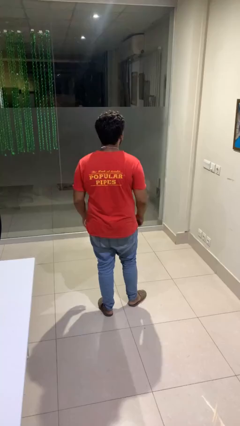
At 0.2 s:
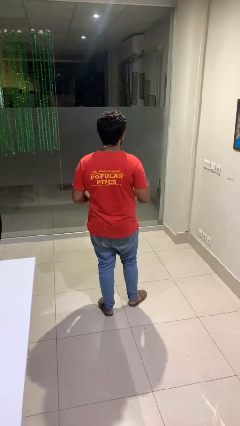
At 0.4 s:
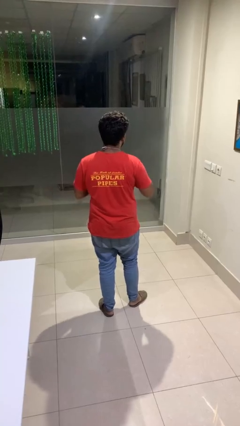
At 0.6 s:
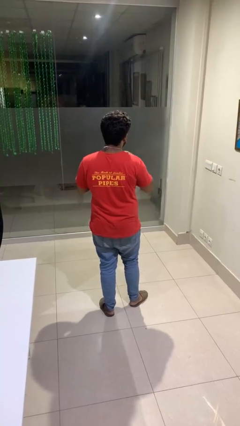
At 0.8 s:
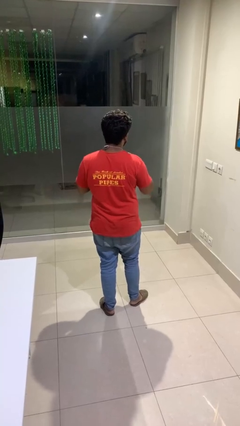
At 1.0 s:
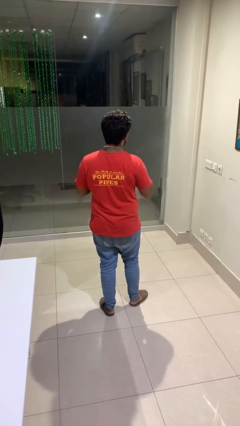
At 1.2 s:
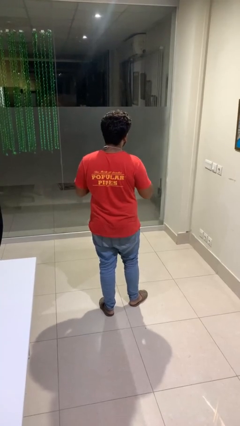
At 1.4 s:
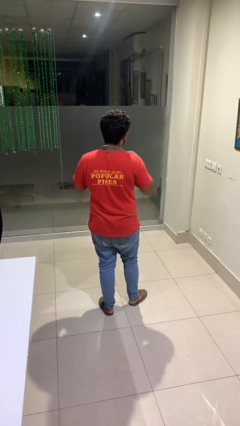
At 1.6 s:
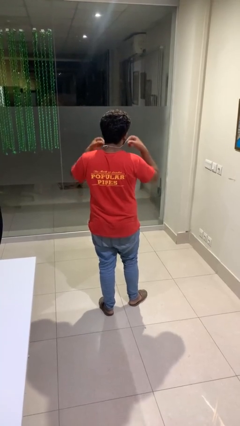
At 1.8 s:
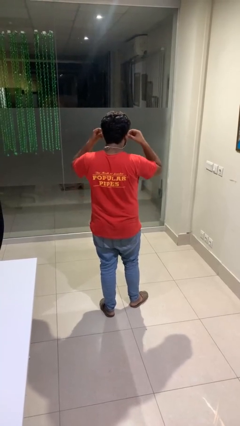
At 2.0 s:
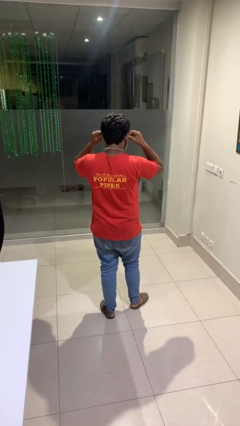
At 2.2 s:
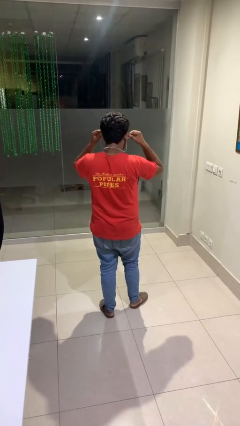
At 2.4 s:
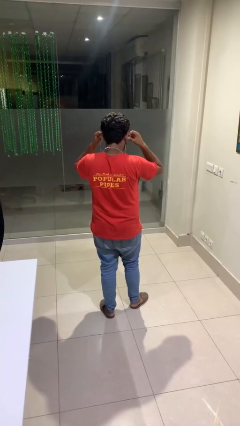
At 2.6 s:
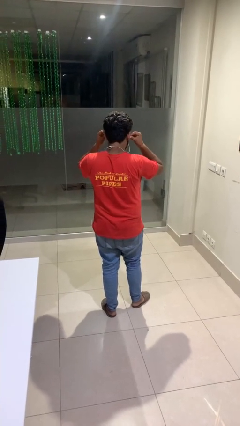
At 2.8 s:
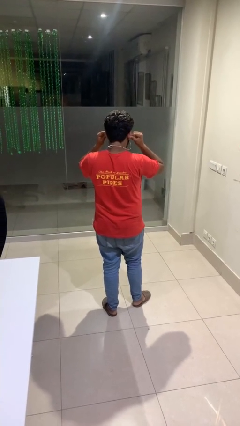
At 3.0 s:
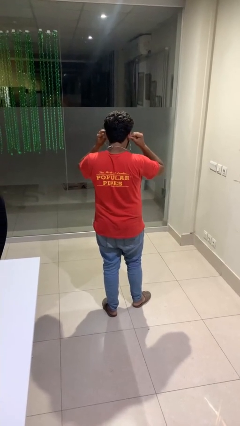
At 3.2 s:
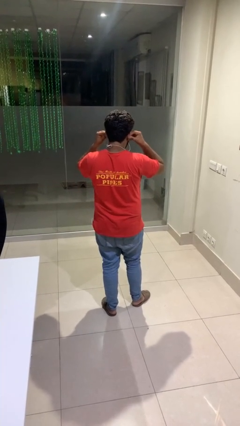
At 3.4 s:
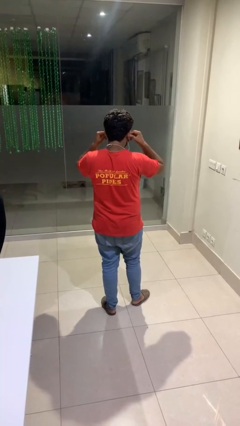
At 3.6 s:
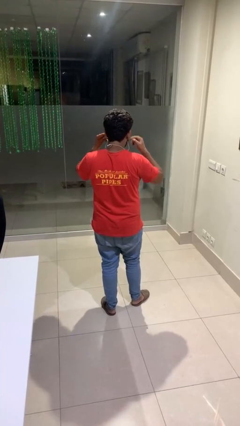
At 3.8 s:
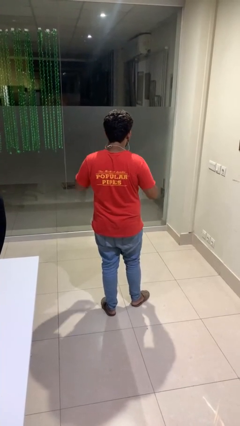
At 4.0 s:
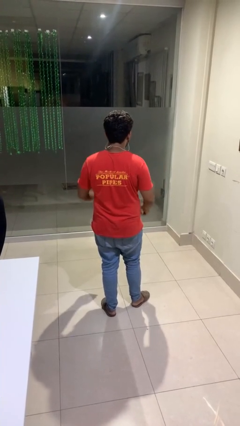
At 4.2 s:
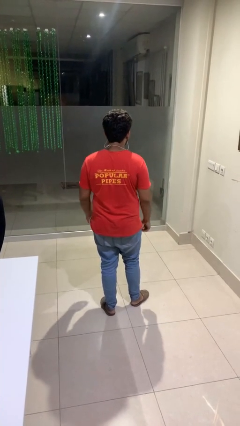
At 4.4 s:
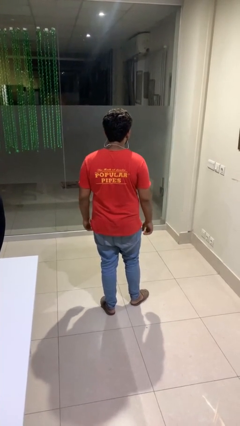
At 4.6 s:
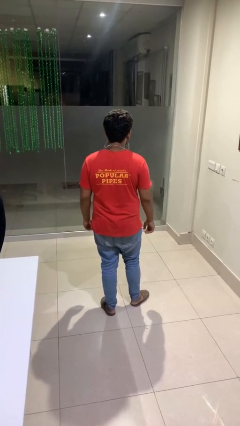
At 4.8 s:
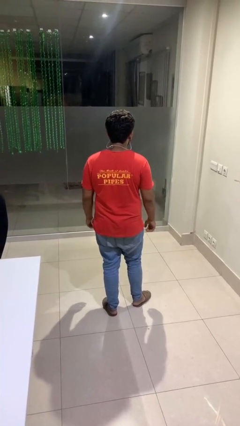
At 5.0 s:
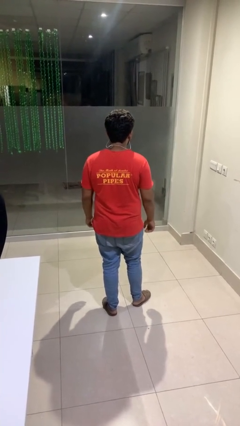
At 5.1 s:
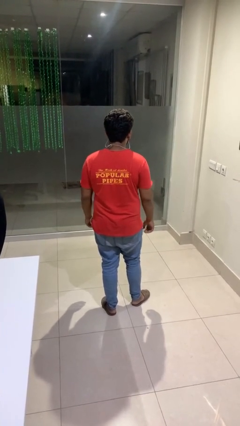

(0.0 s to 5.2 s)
person puts on headphones

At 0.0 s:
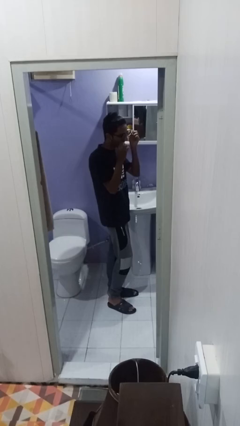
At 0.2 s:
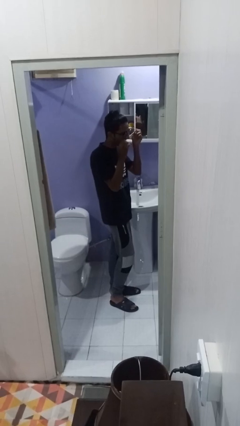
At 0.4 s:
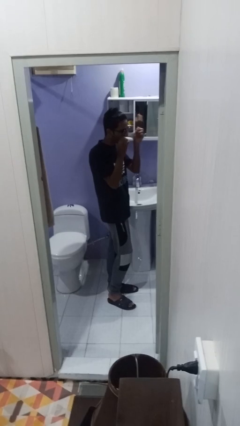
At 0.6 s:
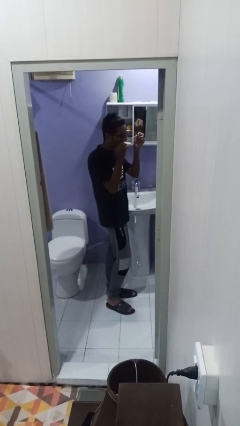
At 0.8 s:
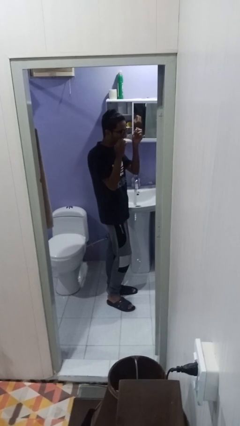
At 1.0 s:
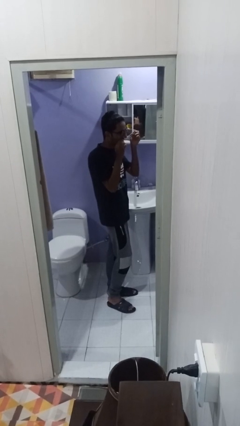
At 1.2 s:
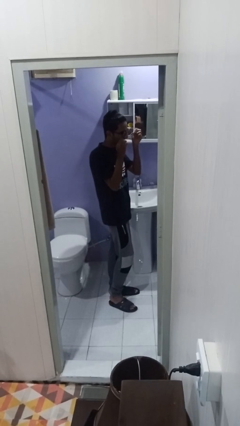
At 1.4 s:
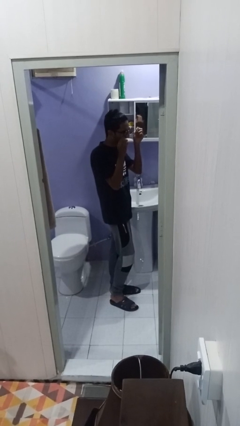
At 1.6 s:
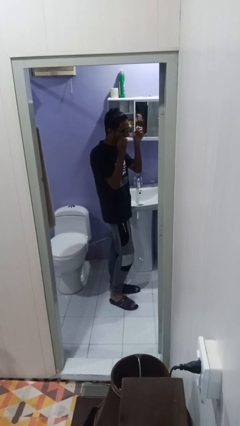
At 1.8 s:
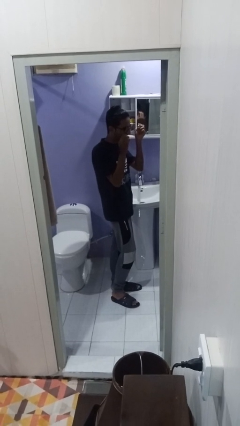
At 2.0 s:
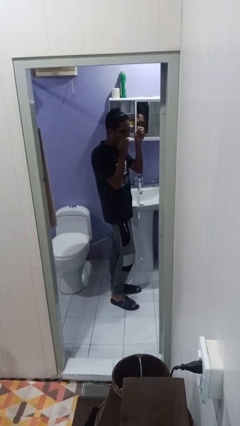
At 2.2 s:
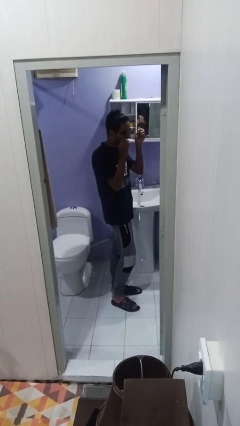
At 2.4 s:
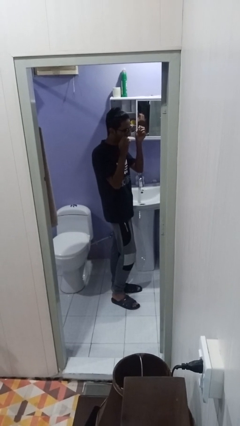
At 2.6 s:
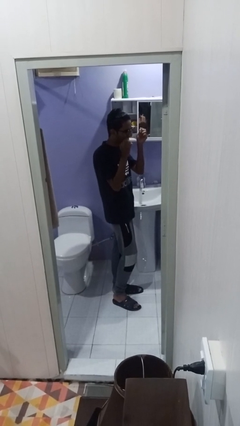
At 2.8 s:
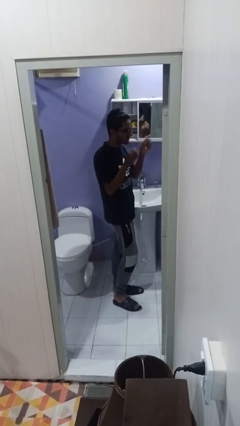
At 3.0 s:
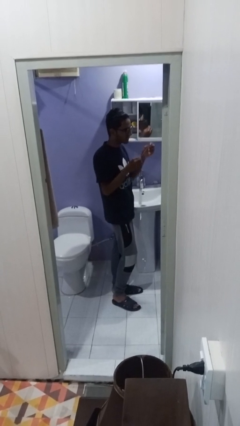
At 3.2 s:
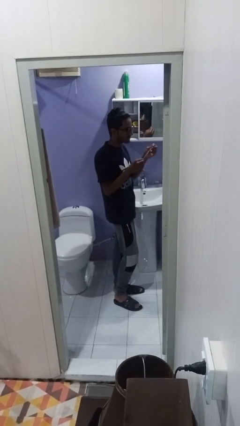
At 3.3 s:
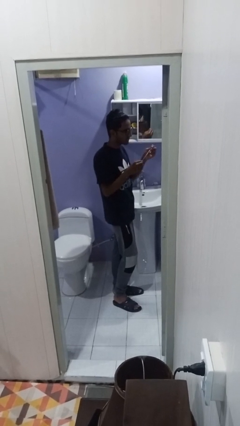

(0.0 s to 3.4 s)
person flosses

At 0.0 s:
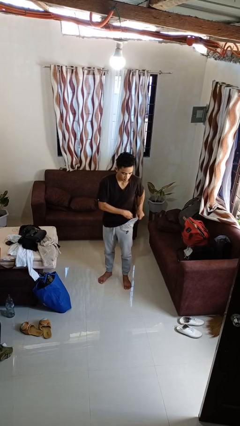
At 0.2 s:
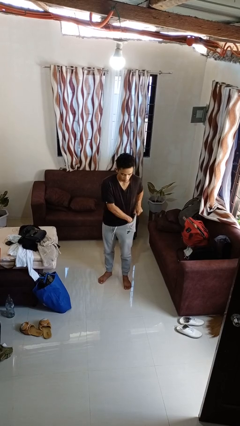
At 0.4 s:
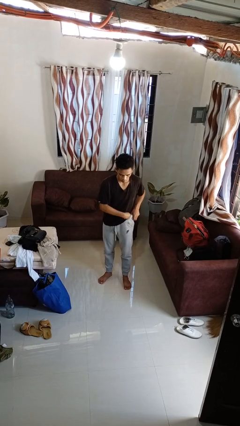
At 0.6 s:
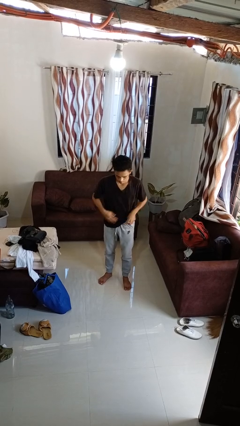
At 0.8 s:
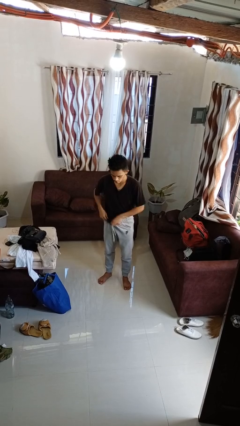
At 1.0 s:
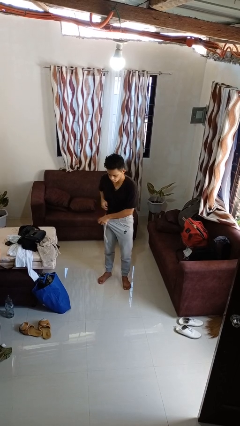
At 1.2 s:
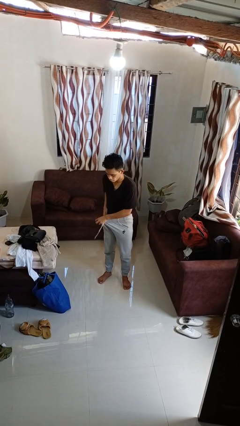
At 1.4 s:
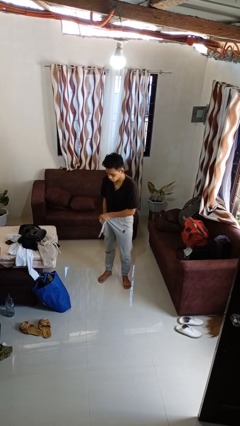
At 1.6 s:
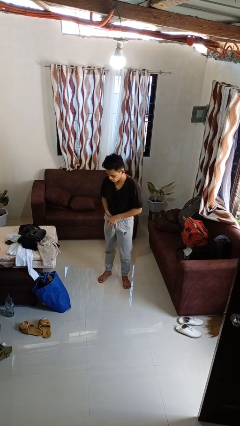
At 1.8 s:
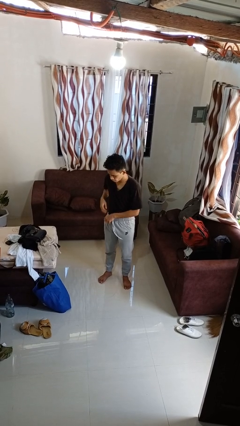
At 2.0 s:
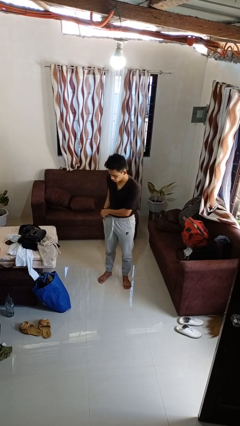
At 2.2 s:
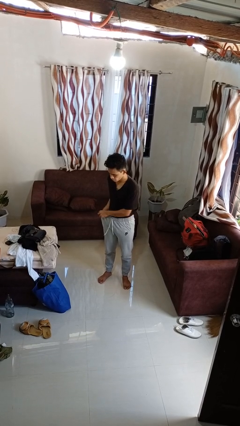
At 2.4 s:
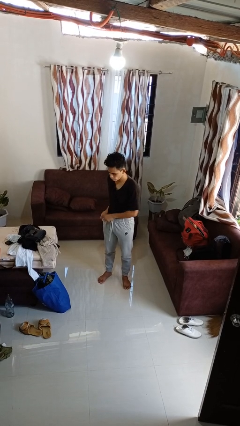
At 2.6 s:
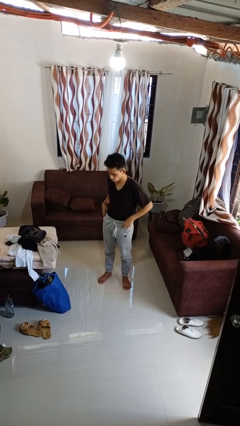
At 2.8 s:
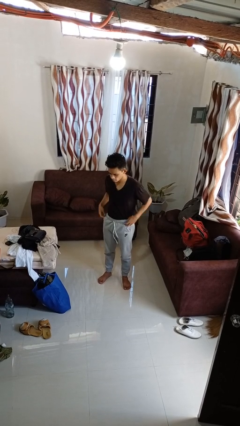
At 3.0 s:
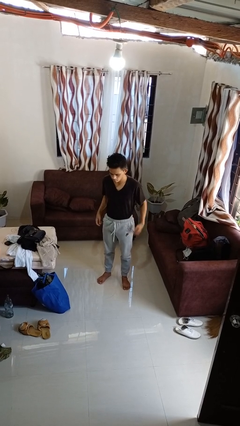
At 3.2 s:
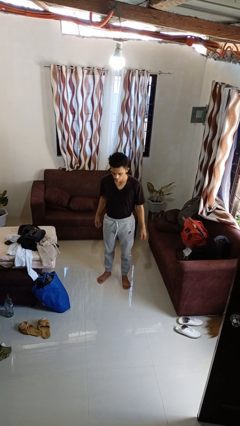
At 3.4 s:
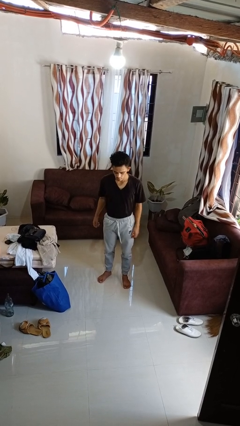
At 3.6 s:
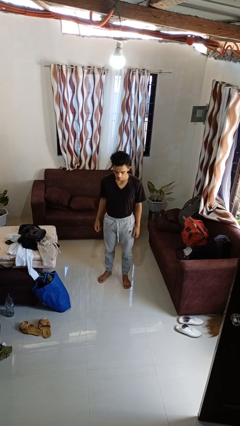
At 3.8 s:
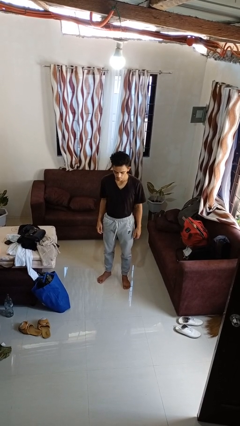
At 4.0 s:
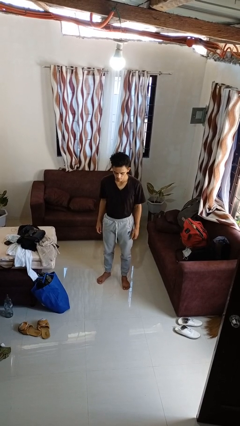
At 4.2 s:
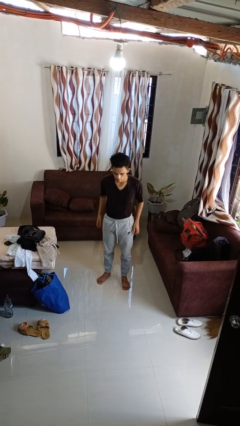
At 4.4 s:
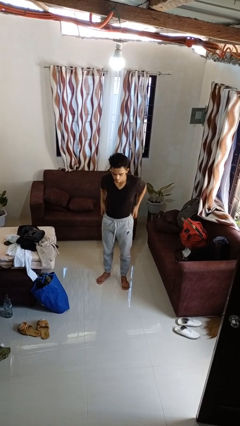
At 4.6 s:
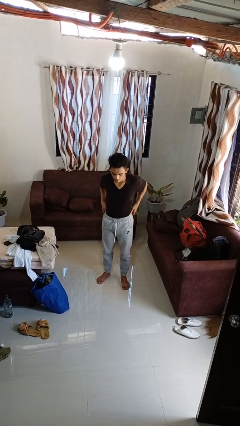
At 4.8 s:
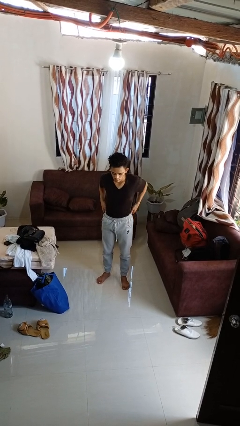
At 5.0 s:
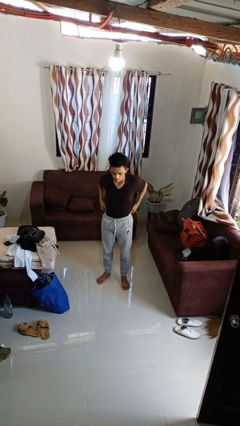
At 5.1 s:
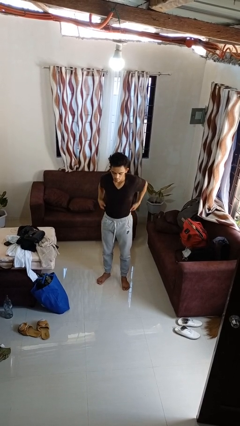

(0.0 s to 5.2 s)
person tucks in shirt

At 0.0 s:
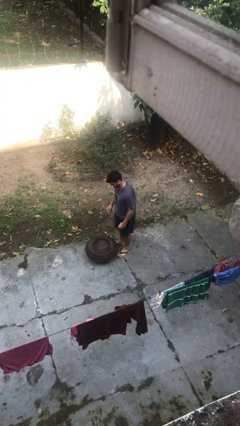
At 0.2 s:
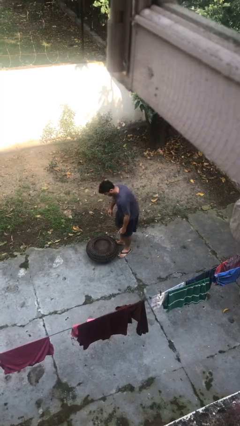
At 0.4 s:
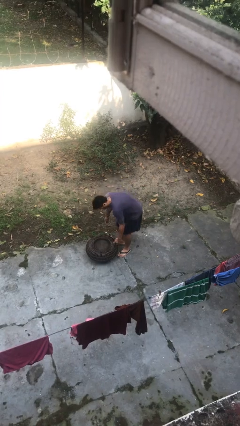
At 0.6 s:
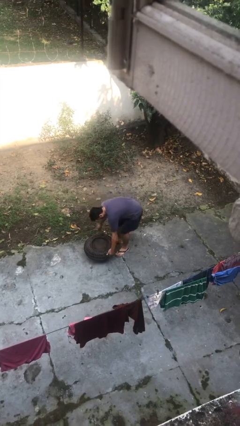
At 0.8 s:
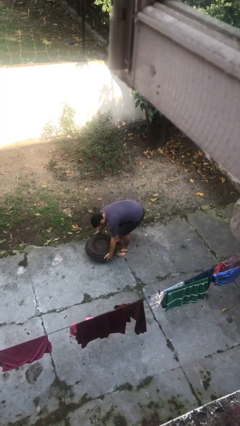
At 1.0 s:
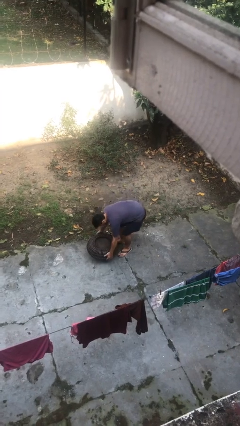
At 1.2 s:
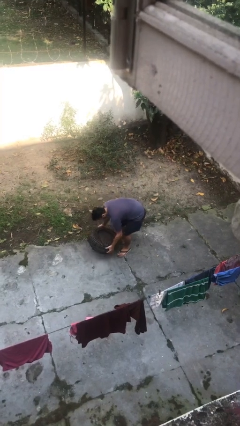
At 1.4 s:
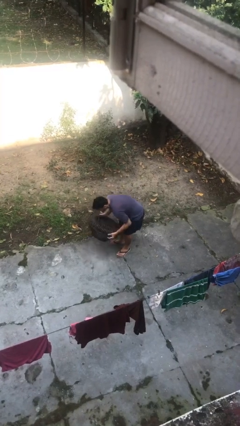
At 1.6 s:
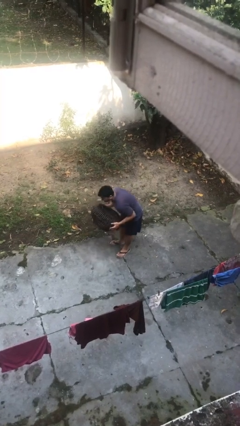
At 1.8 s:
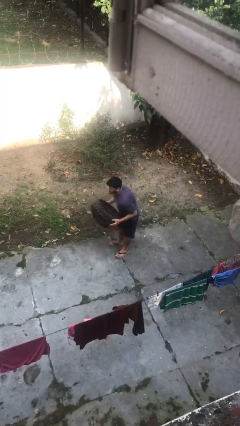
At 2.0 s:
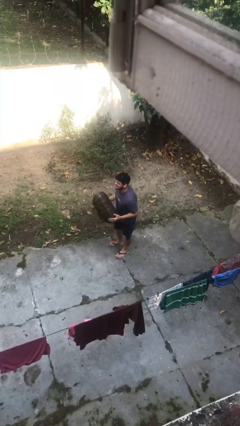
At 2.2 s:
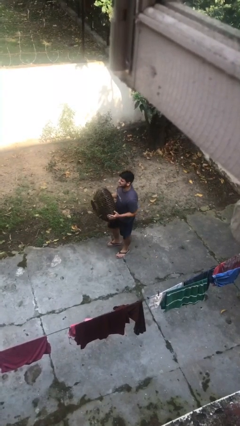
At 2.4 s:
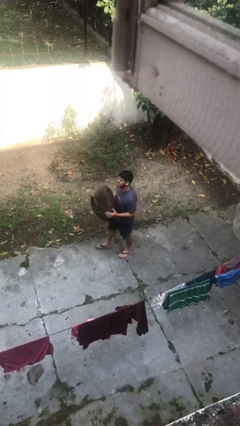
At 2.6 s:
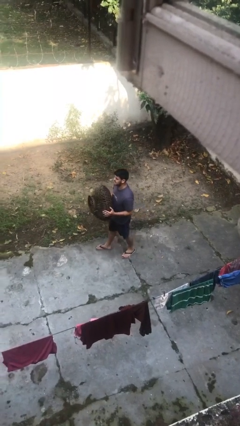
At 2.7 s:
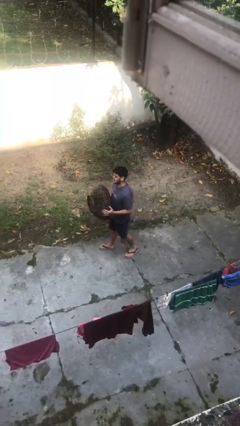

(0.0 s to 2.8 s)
person picks up object from floor

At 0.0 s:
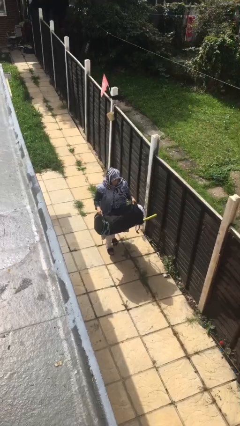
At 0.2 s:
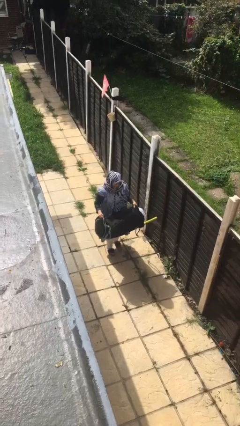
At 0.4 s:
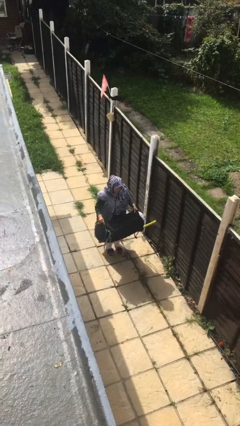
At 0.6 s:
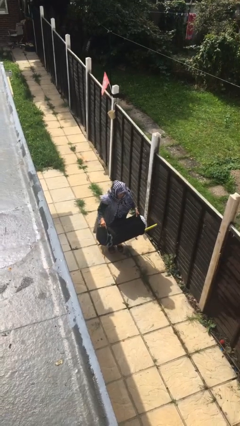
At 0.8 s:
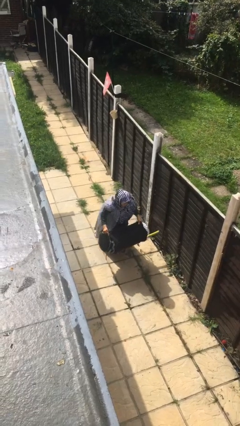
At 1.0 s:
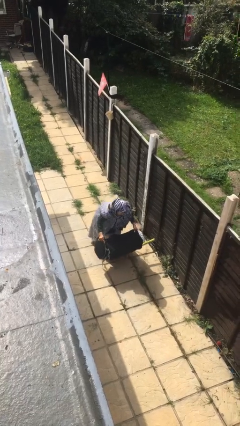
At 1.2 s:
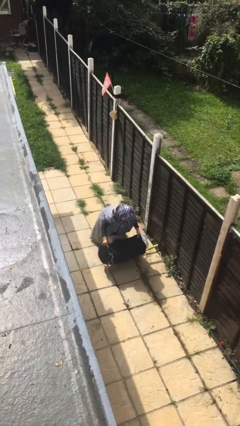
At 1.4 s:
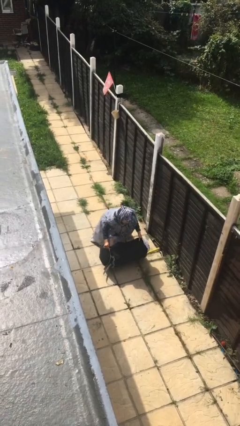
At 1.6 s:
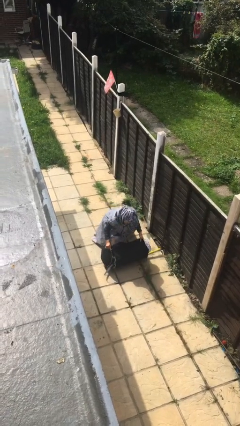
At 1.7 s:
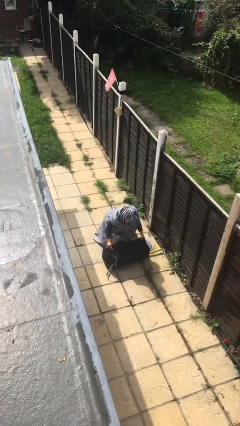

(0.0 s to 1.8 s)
person puts down object on floor
